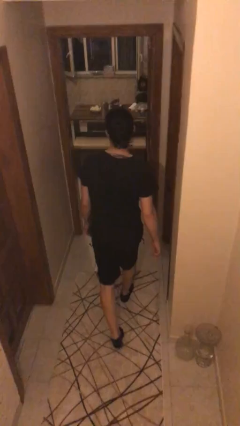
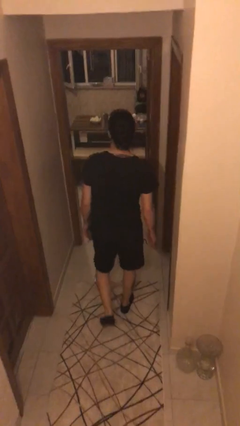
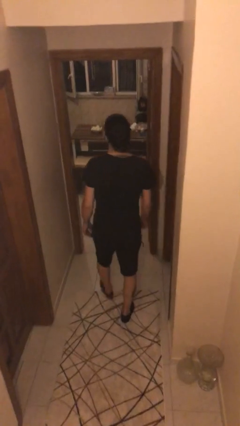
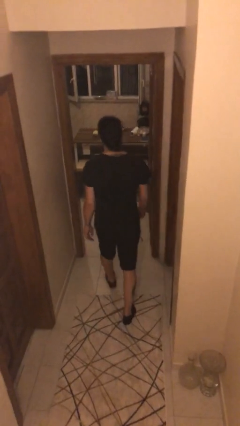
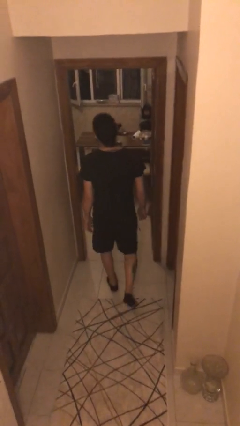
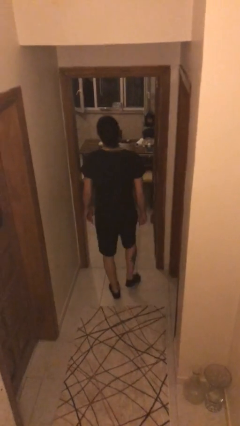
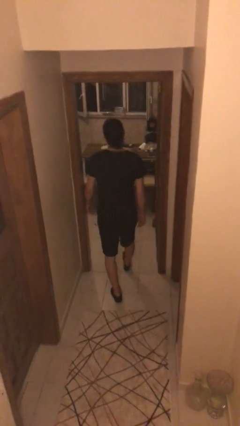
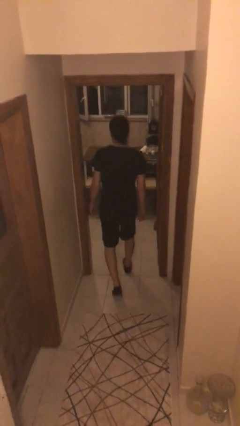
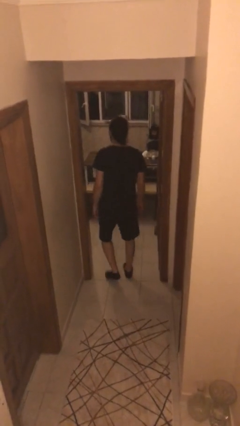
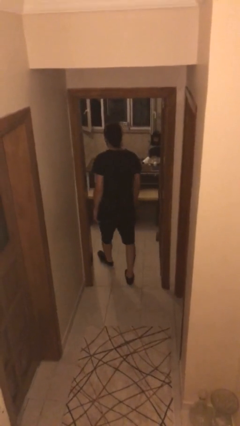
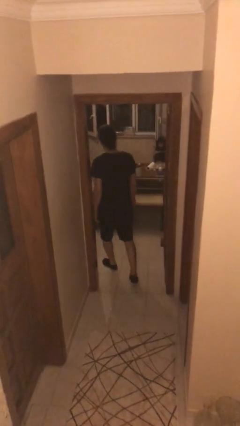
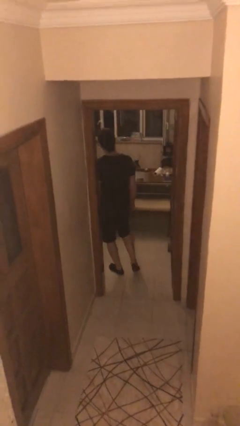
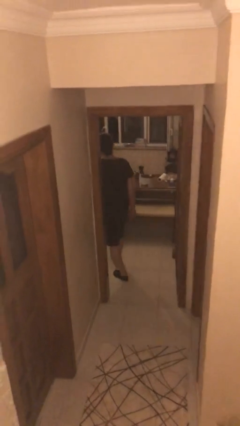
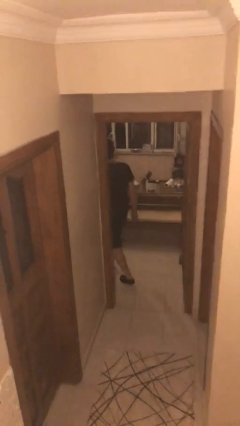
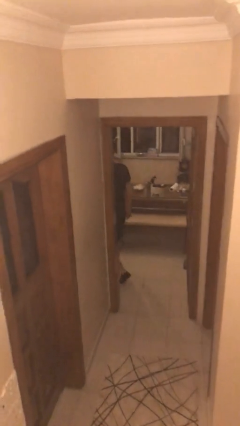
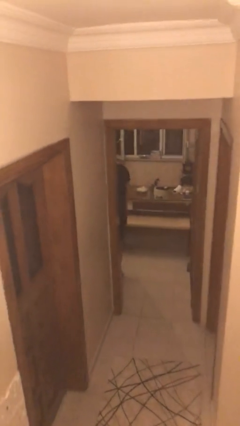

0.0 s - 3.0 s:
person exits scene through structure

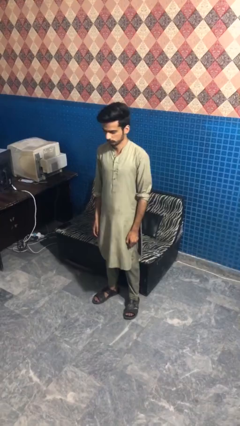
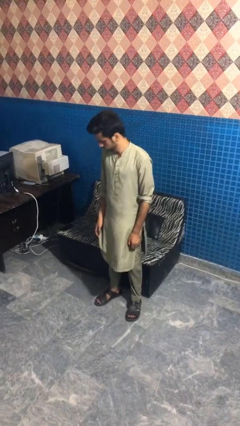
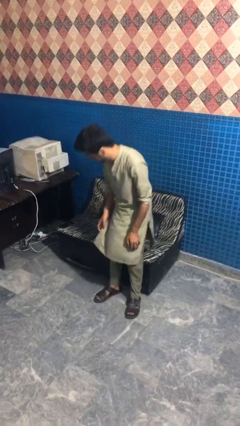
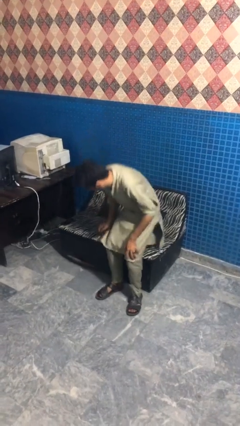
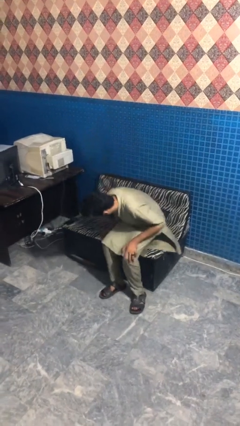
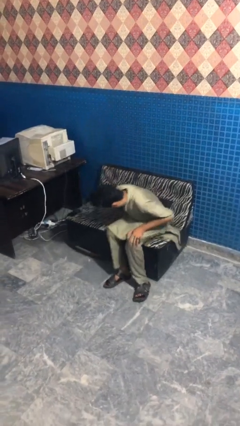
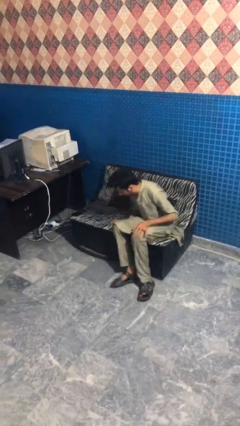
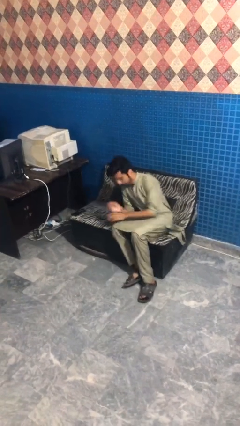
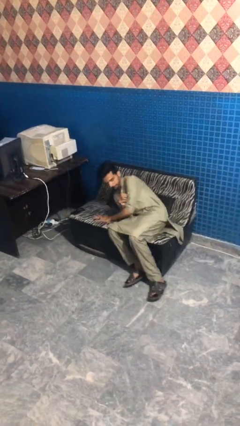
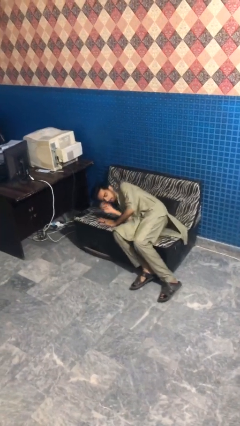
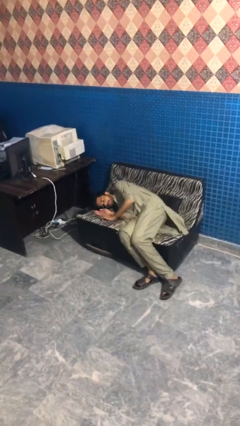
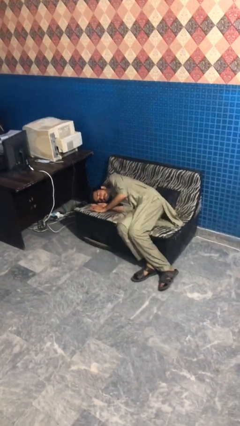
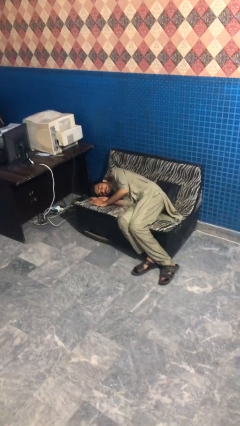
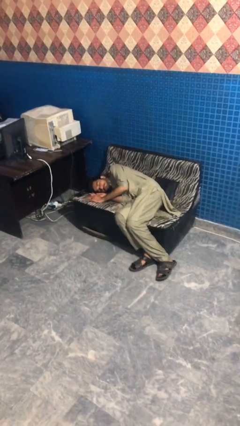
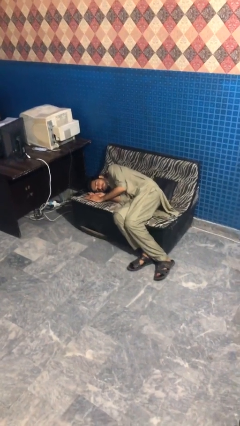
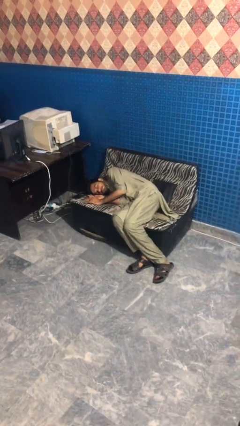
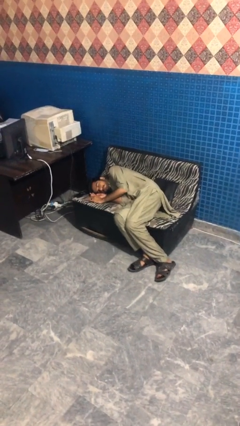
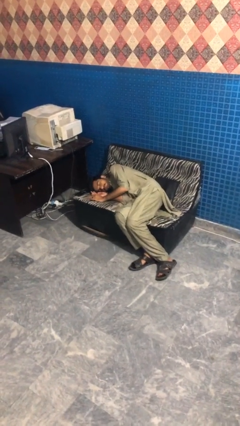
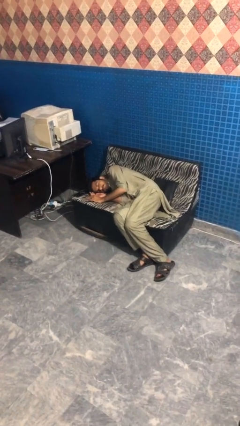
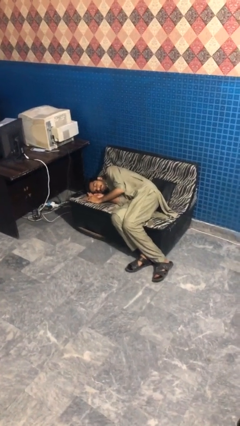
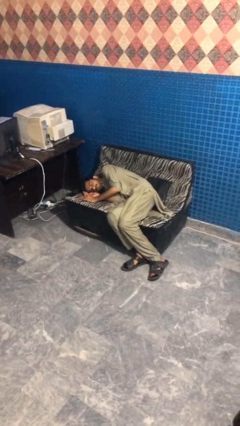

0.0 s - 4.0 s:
person lies down on couch

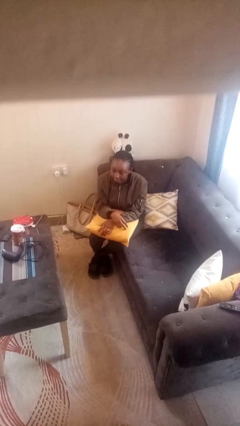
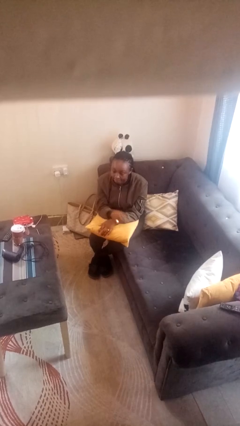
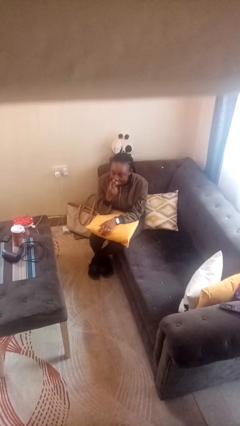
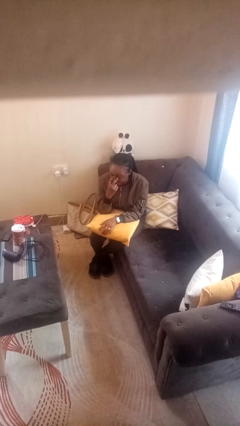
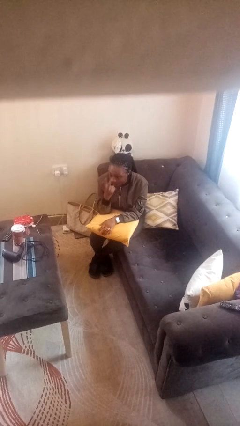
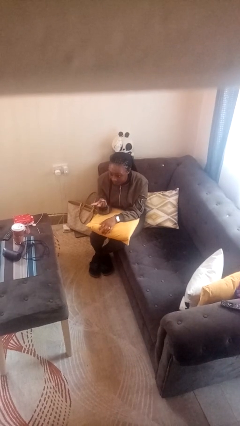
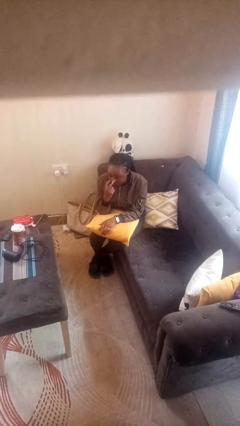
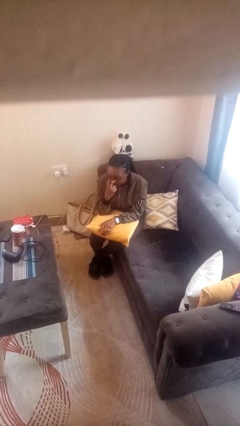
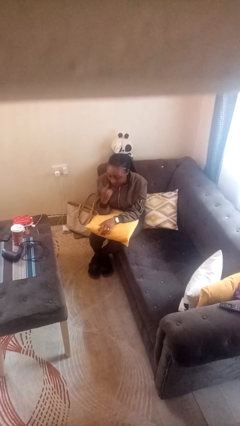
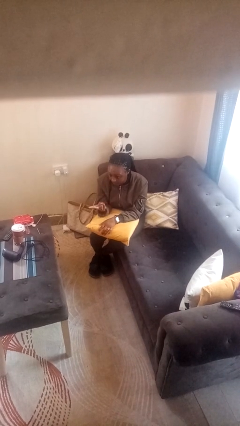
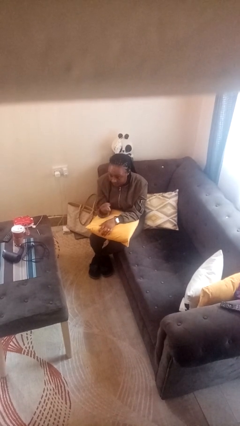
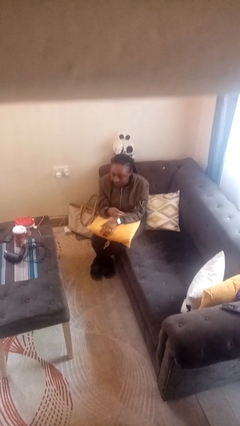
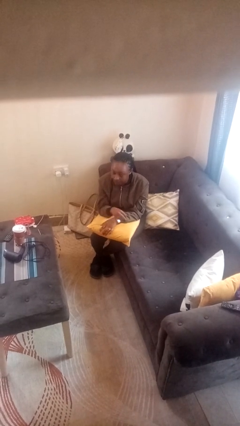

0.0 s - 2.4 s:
person gestures watch closely

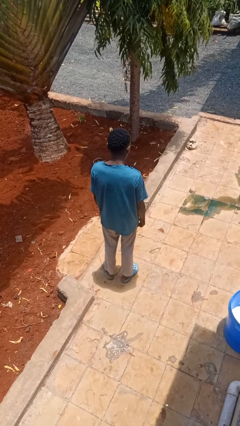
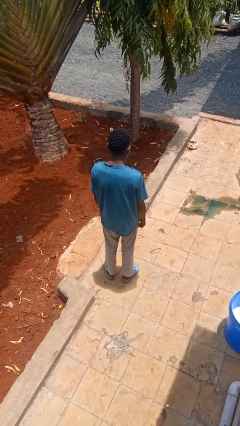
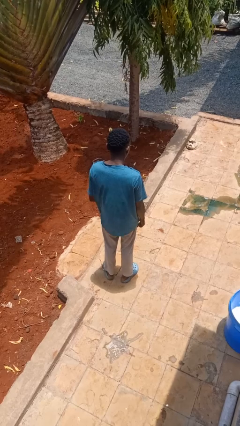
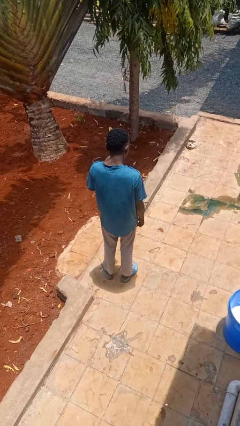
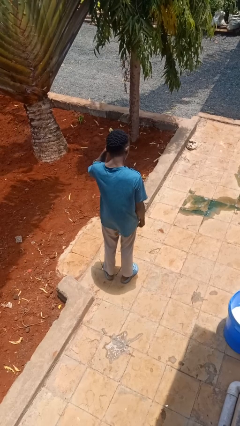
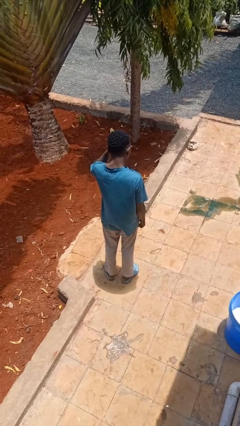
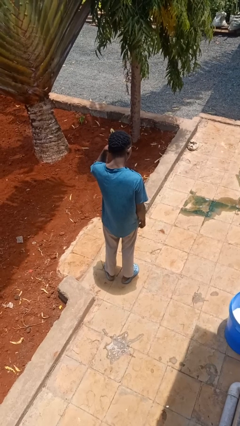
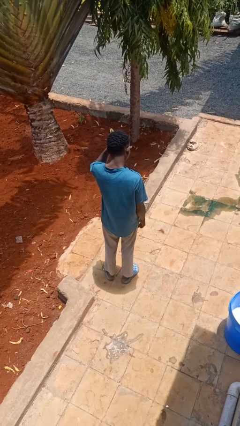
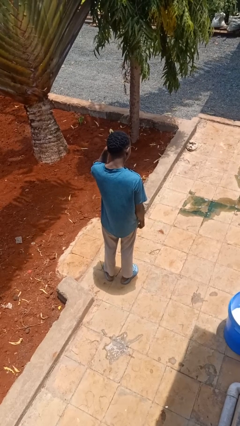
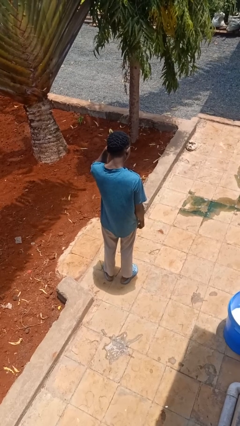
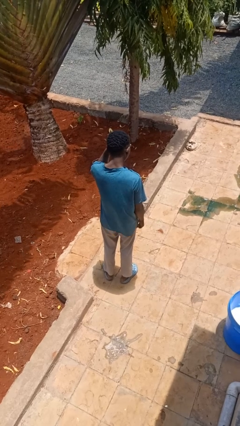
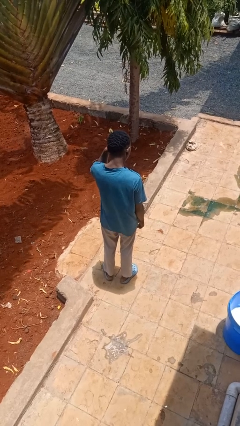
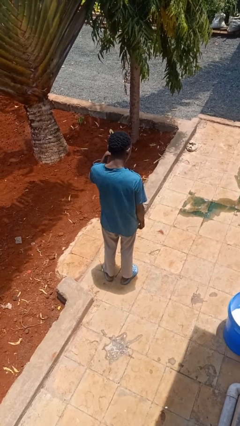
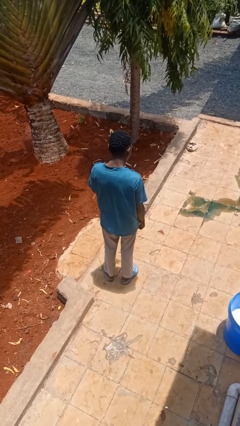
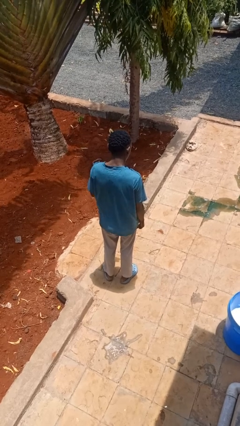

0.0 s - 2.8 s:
person rubs eyes

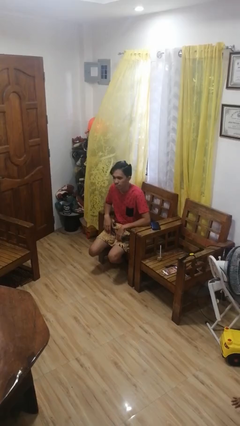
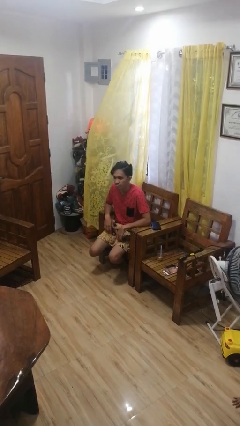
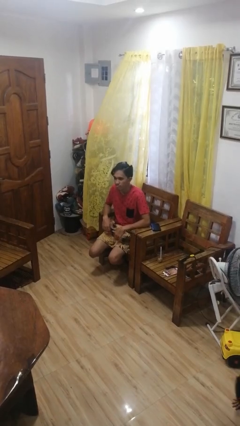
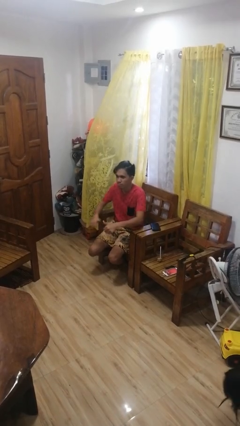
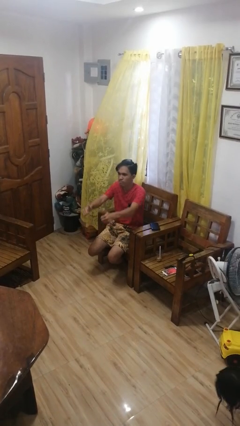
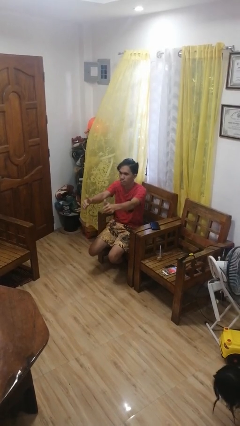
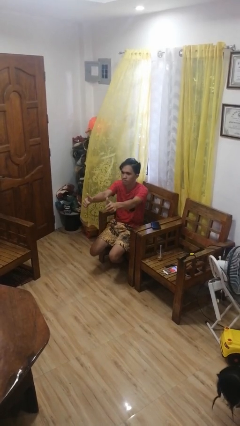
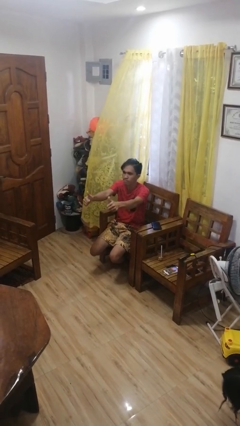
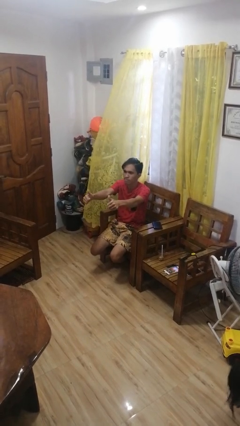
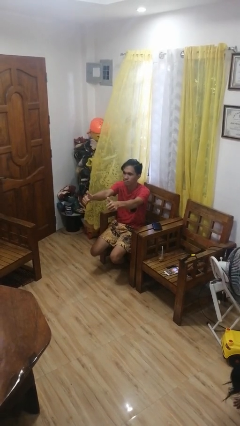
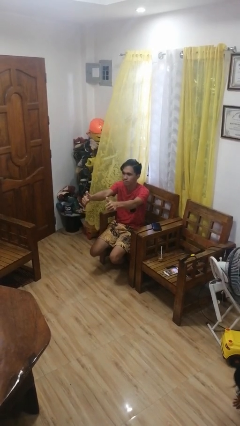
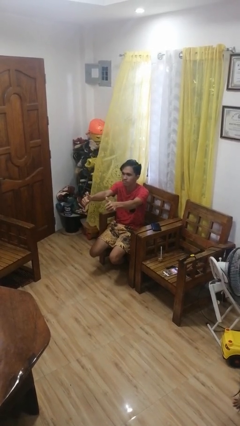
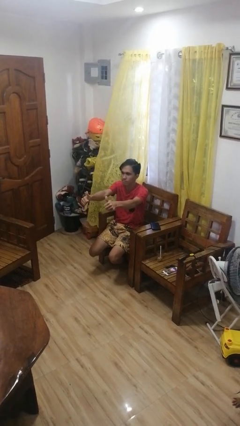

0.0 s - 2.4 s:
person gestures thumbs up

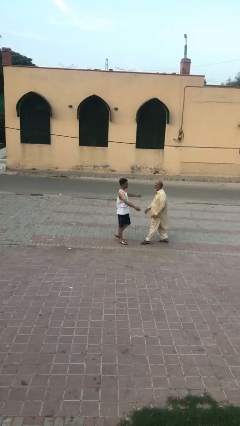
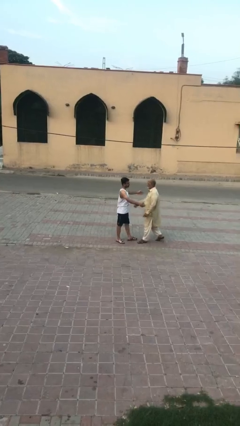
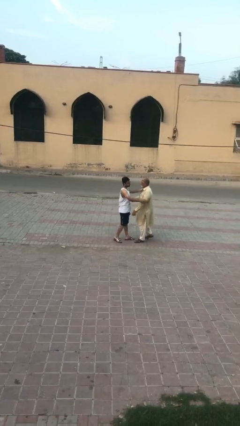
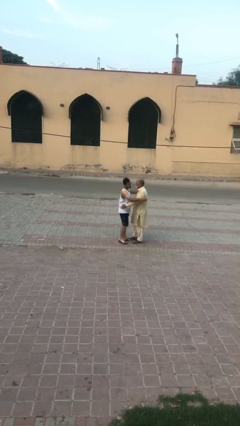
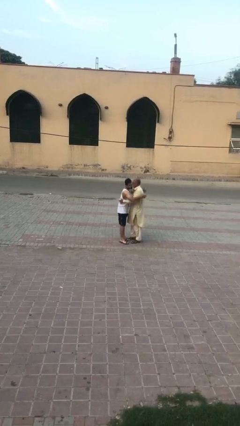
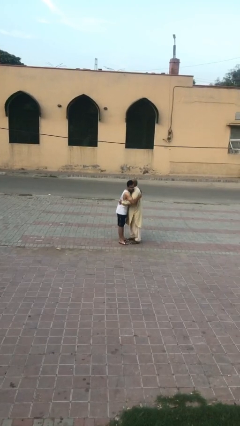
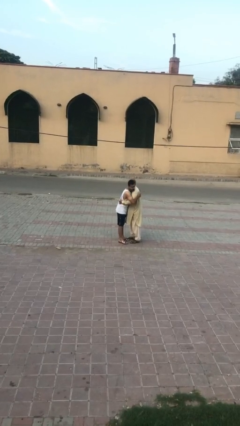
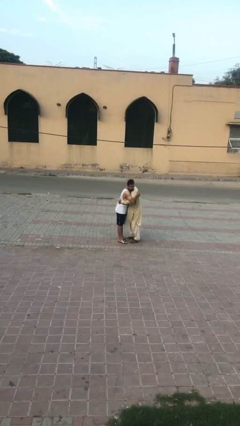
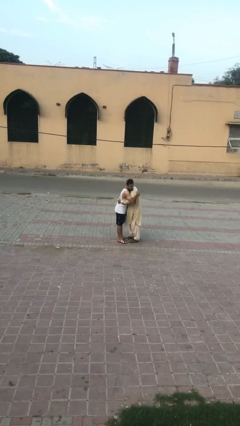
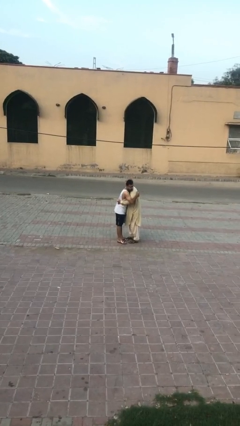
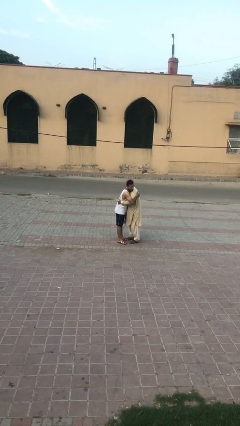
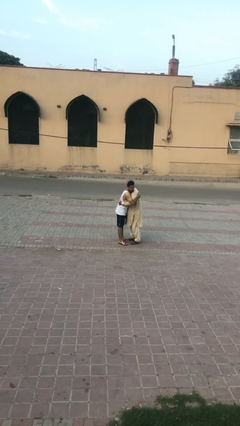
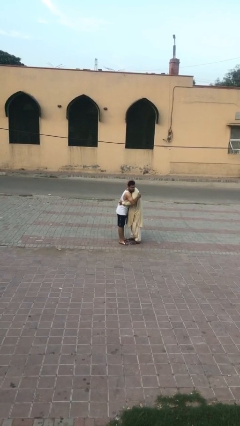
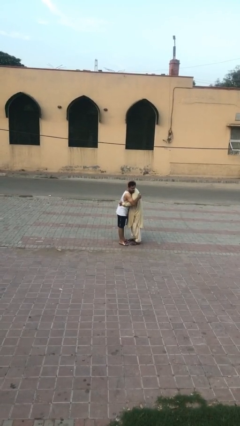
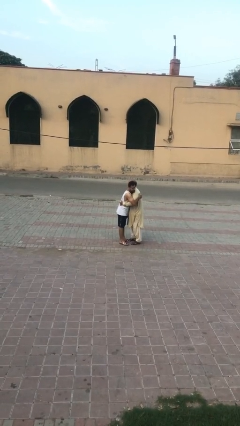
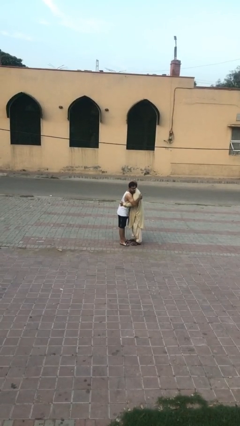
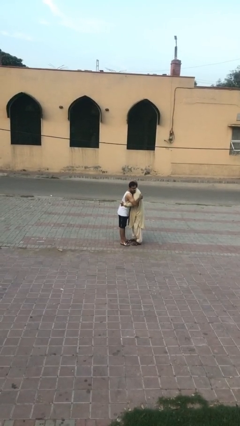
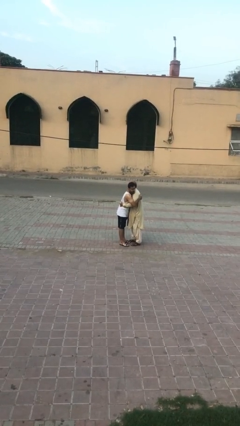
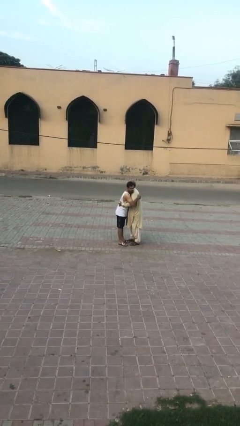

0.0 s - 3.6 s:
person embraces person
